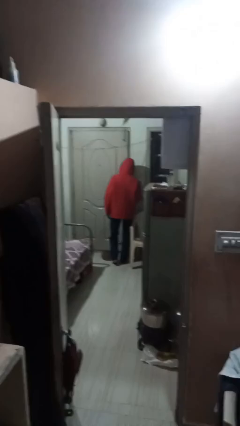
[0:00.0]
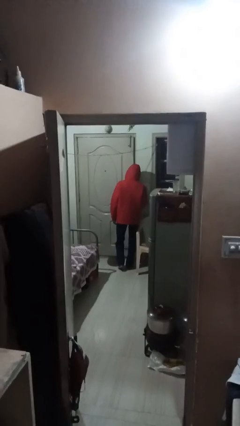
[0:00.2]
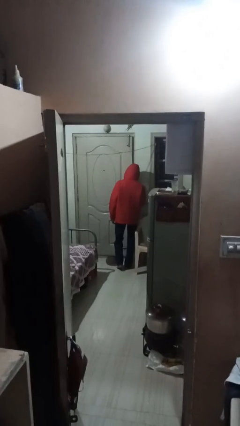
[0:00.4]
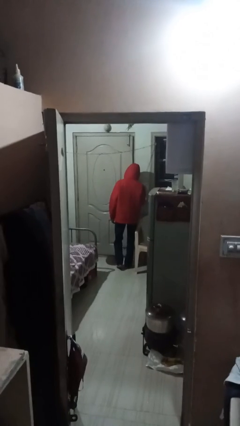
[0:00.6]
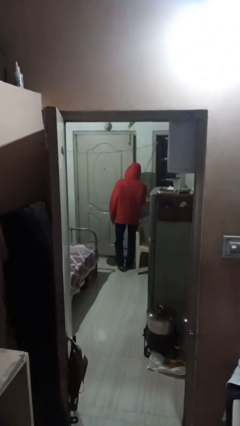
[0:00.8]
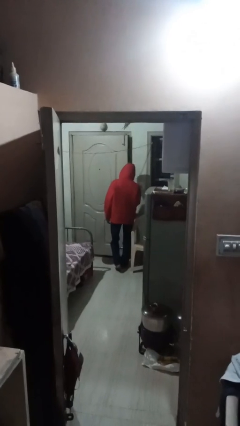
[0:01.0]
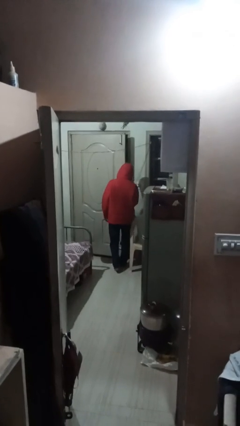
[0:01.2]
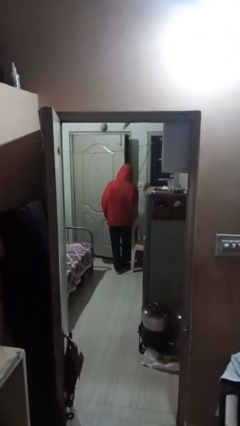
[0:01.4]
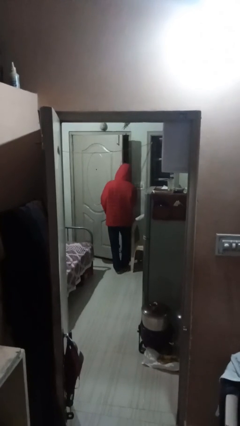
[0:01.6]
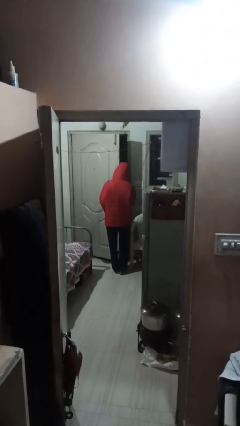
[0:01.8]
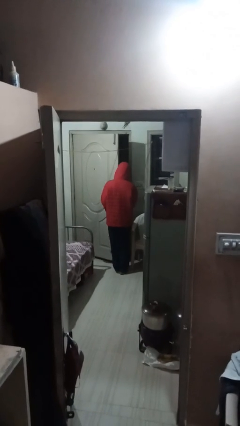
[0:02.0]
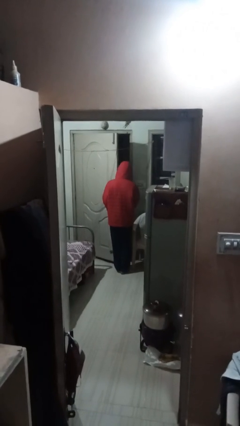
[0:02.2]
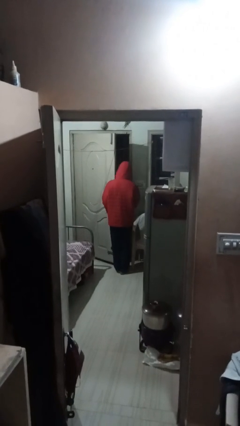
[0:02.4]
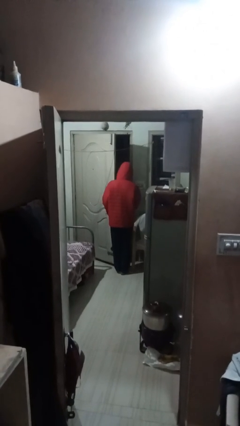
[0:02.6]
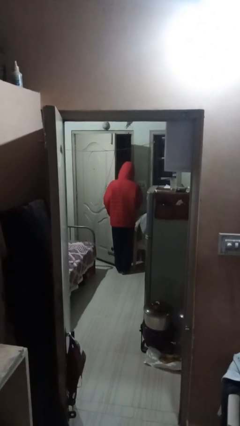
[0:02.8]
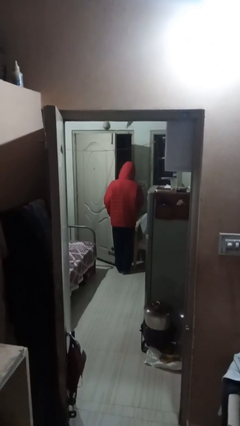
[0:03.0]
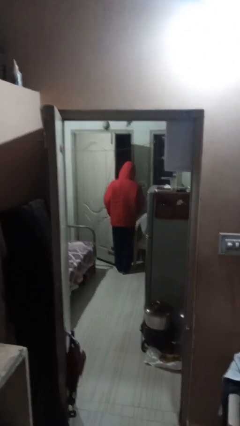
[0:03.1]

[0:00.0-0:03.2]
person opens facility door

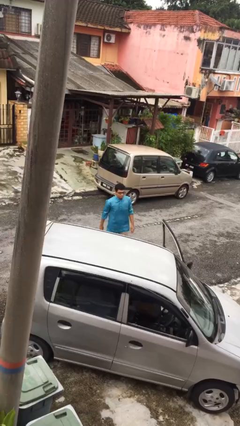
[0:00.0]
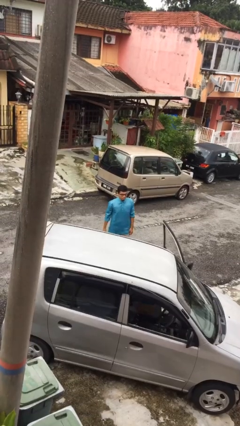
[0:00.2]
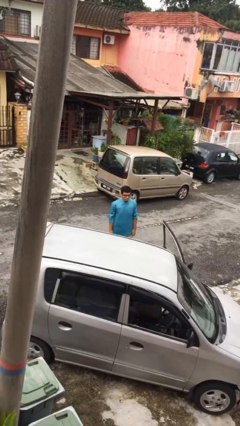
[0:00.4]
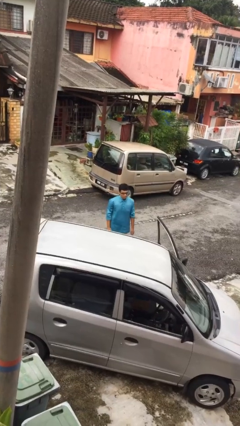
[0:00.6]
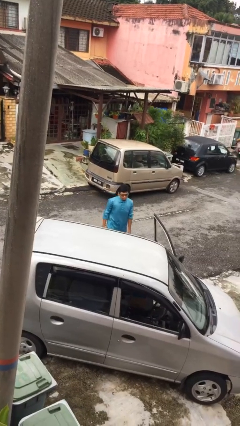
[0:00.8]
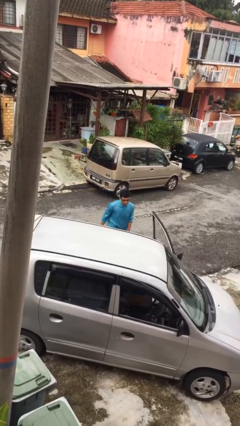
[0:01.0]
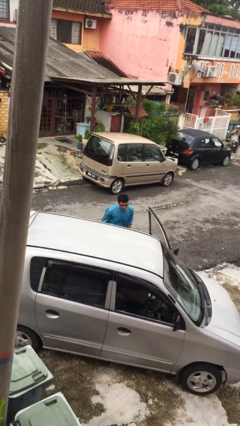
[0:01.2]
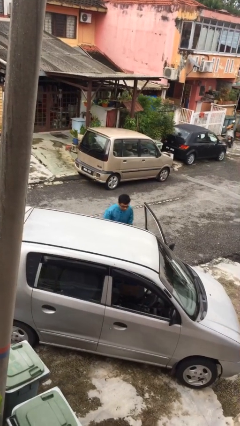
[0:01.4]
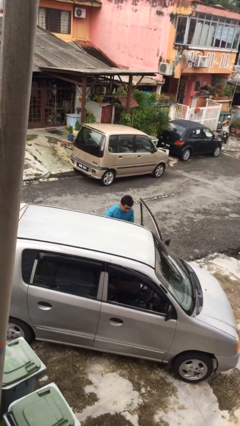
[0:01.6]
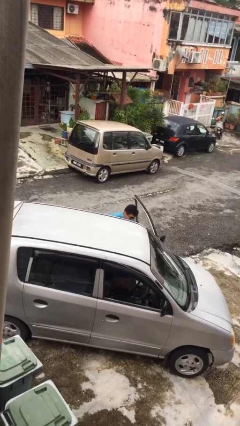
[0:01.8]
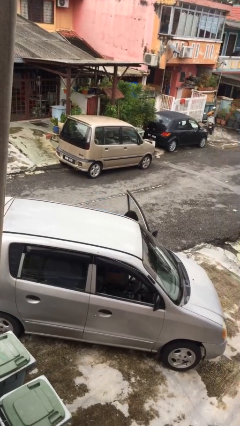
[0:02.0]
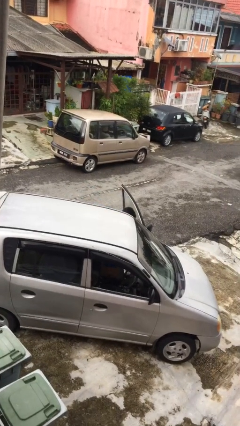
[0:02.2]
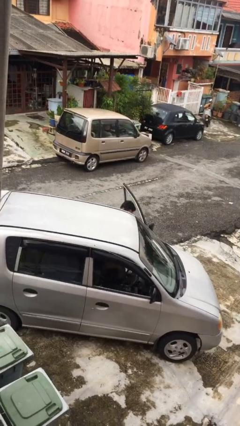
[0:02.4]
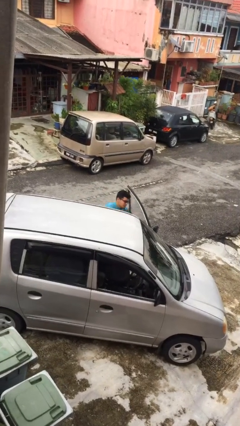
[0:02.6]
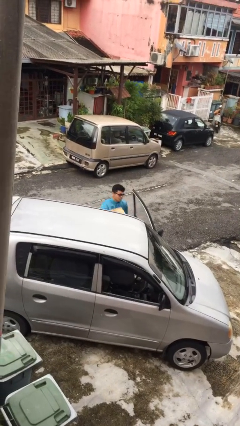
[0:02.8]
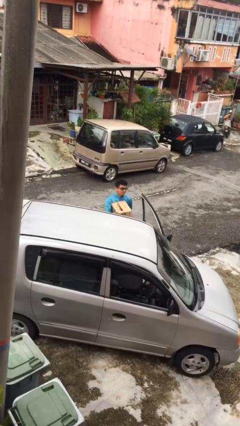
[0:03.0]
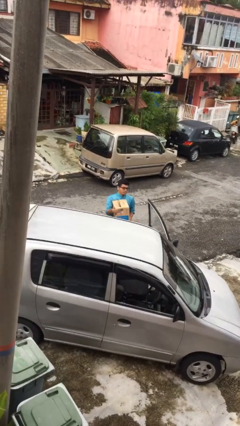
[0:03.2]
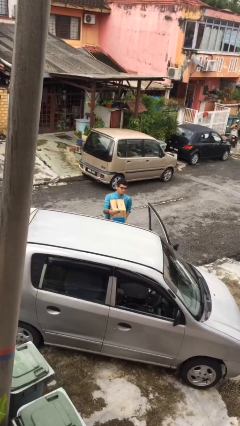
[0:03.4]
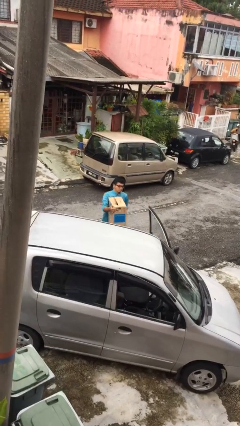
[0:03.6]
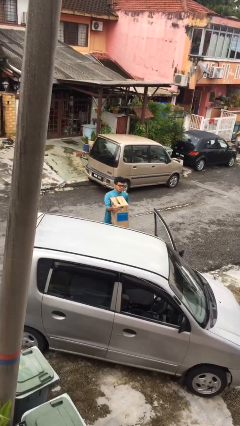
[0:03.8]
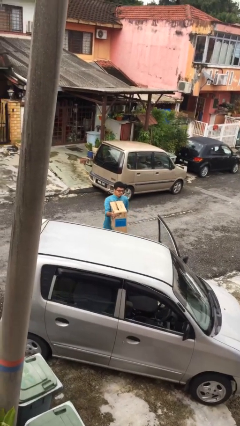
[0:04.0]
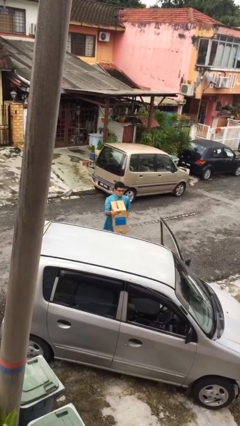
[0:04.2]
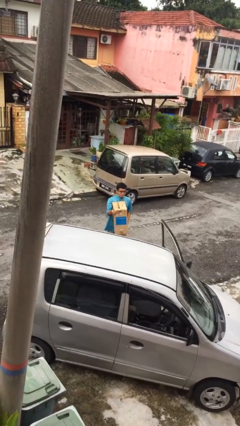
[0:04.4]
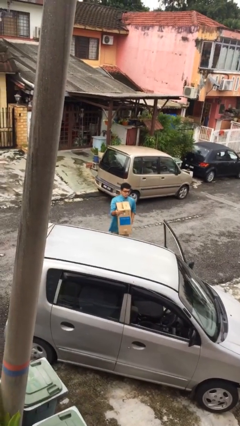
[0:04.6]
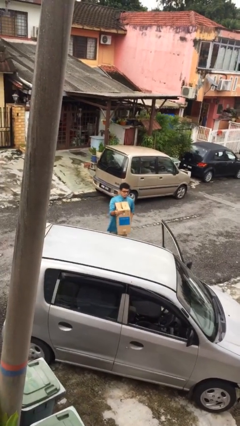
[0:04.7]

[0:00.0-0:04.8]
person unloads car

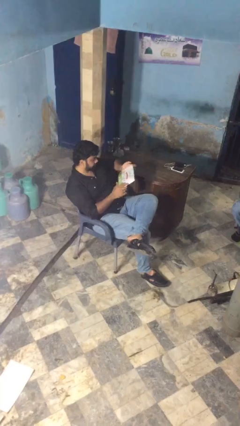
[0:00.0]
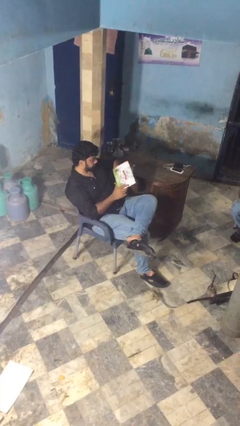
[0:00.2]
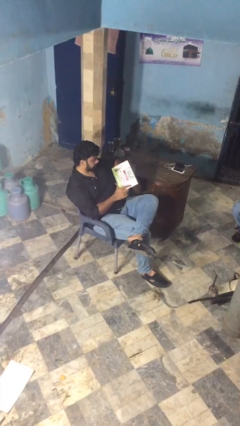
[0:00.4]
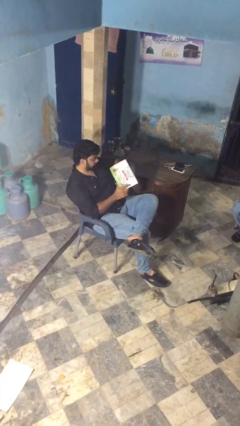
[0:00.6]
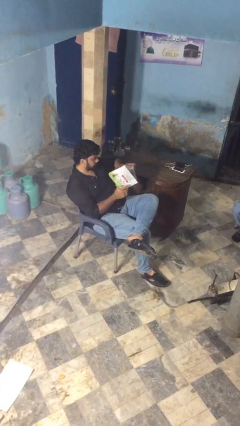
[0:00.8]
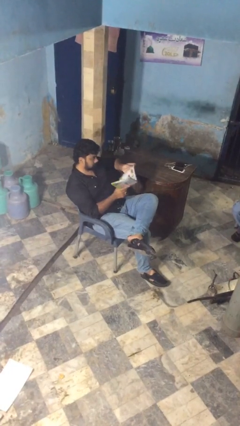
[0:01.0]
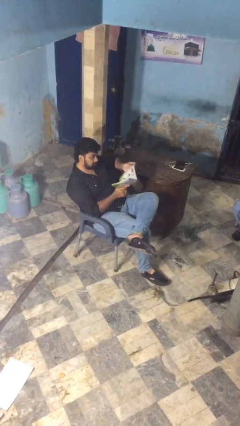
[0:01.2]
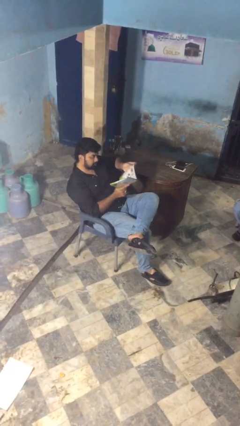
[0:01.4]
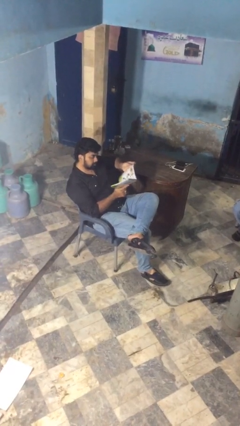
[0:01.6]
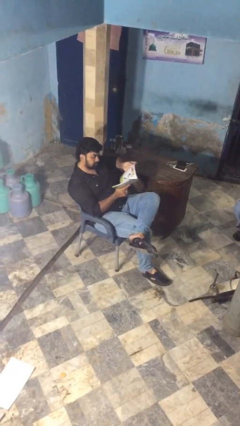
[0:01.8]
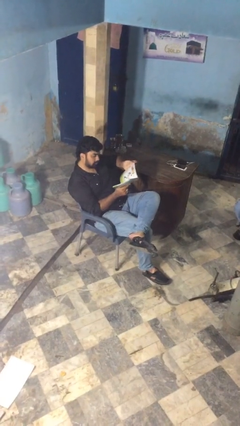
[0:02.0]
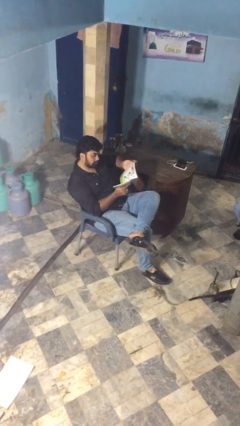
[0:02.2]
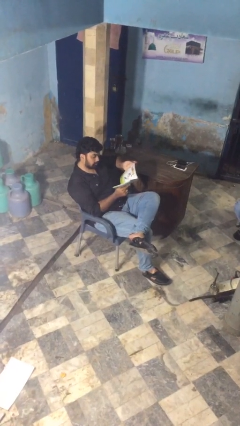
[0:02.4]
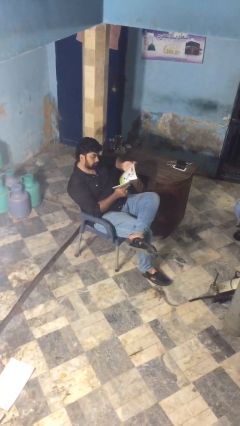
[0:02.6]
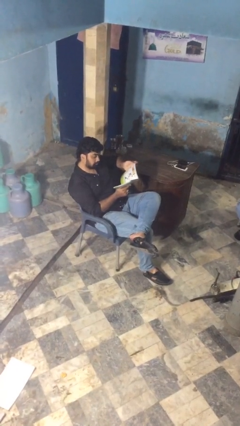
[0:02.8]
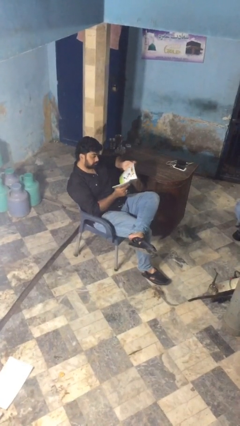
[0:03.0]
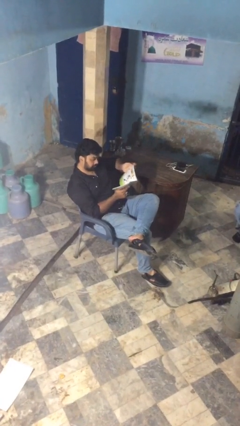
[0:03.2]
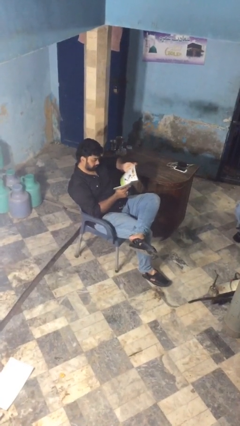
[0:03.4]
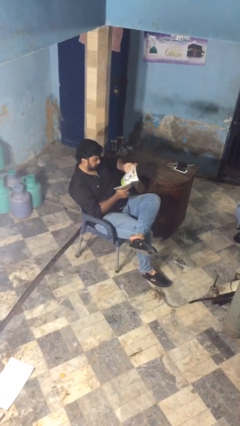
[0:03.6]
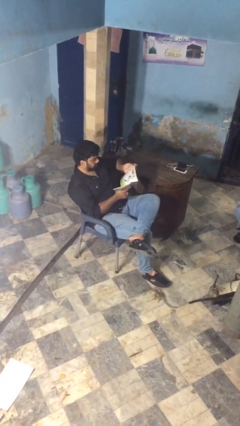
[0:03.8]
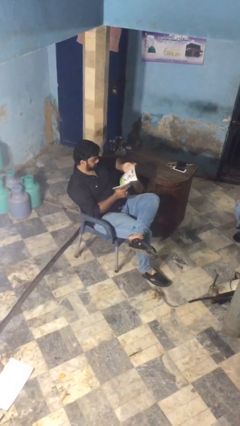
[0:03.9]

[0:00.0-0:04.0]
person reads document

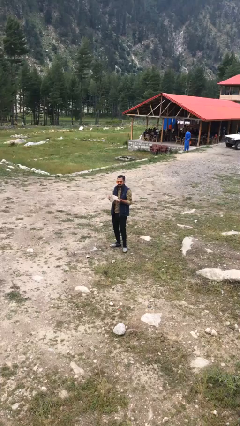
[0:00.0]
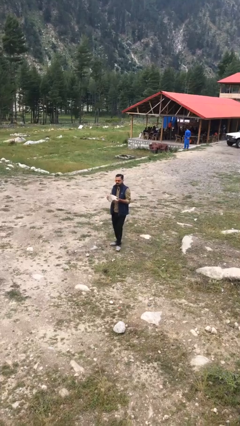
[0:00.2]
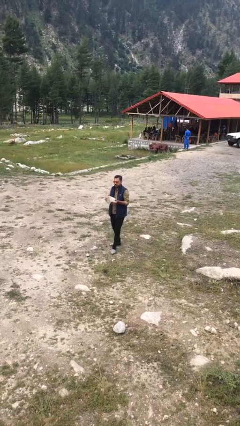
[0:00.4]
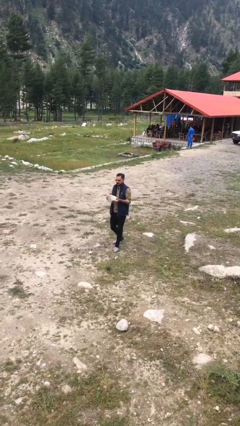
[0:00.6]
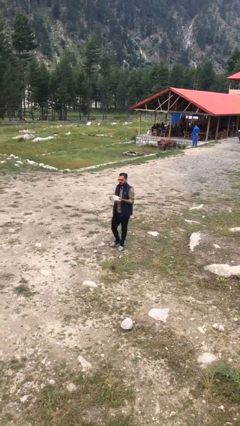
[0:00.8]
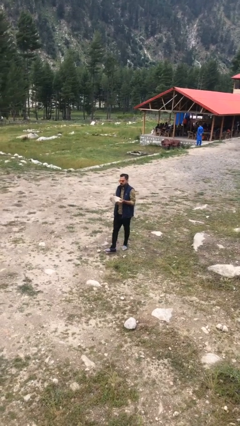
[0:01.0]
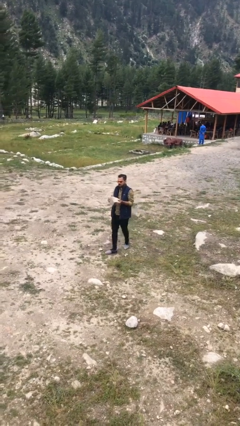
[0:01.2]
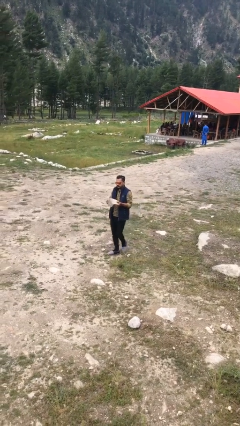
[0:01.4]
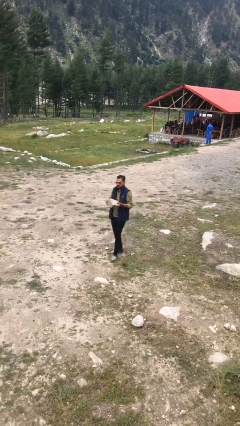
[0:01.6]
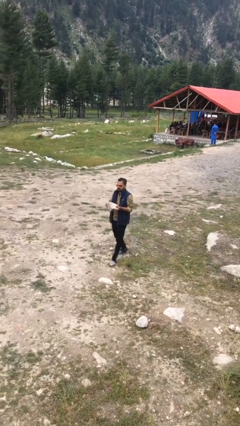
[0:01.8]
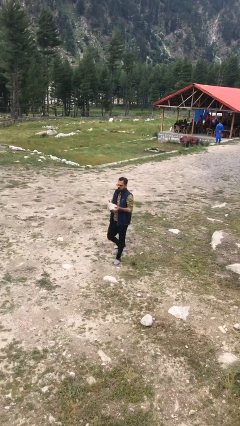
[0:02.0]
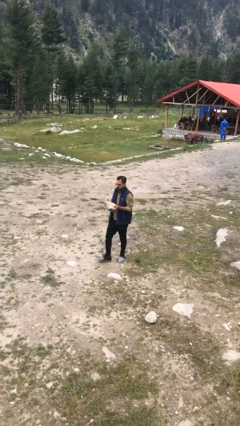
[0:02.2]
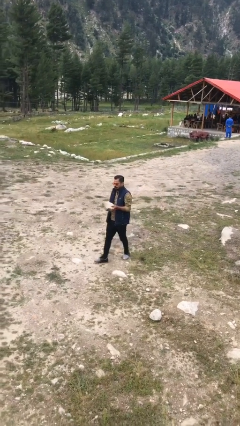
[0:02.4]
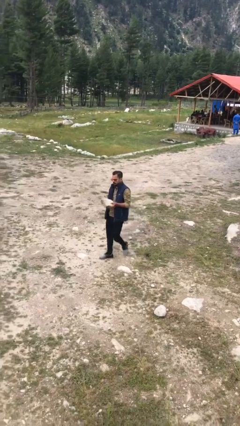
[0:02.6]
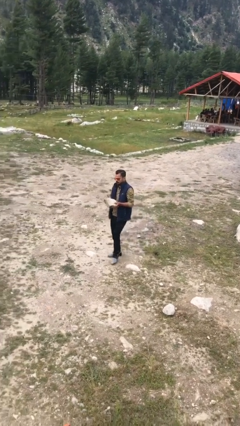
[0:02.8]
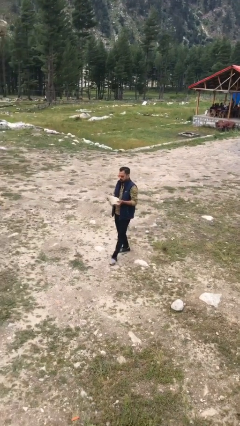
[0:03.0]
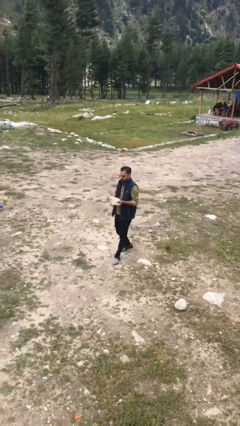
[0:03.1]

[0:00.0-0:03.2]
person carries heavy object

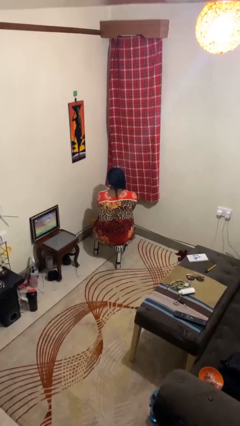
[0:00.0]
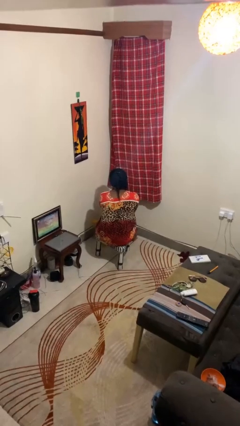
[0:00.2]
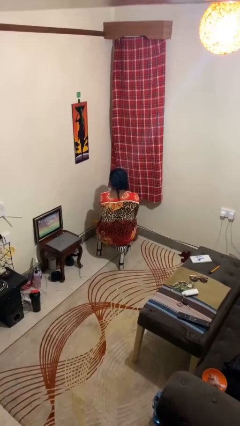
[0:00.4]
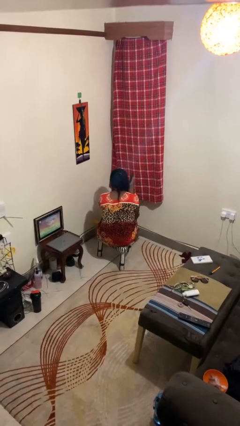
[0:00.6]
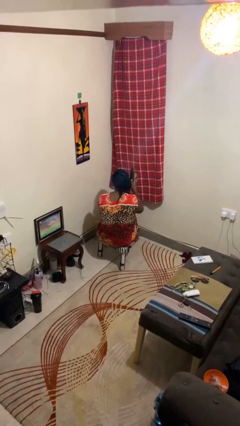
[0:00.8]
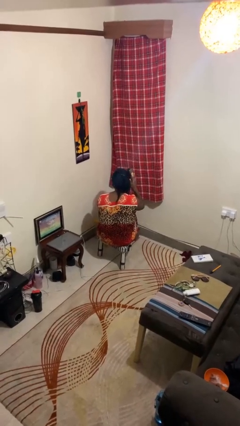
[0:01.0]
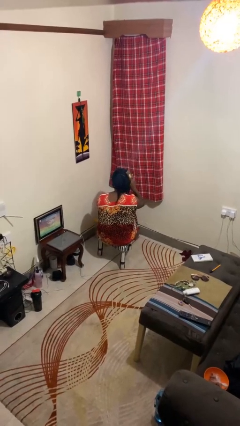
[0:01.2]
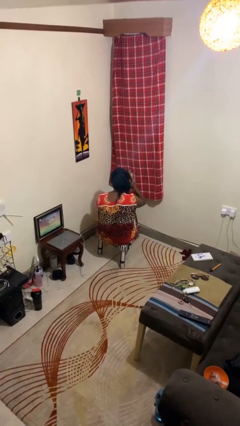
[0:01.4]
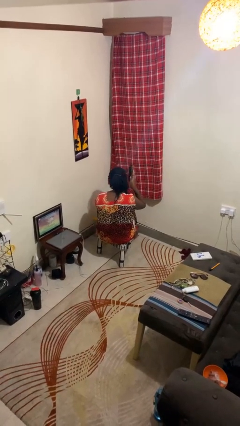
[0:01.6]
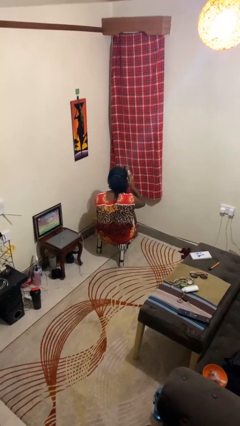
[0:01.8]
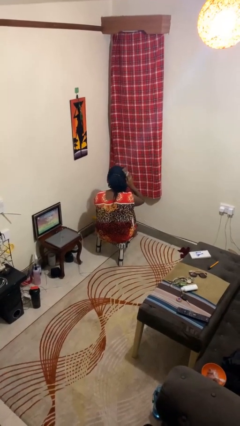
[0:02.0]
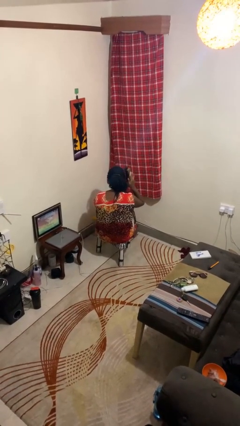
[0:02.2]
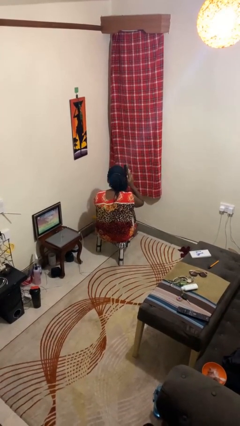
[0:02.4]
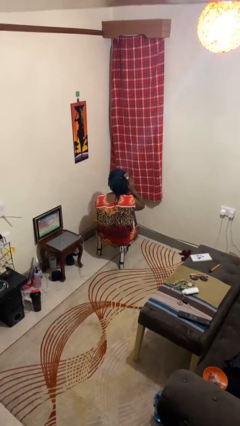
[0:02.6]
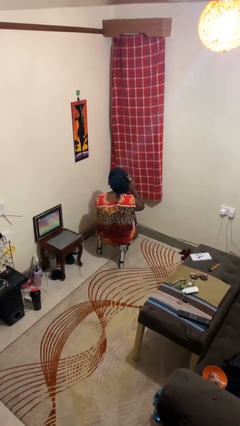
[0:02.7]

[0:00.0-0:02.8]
person brushes hair
